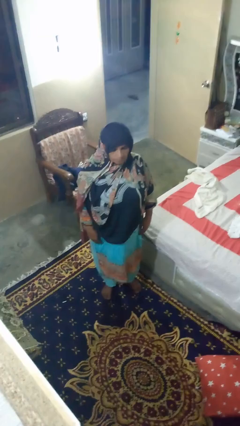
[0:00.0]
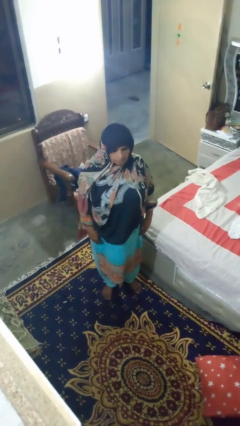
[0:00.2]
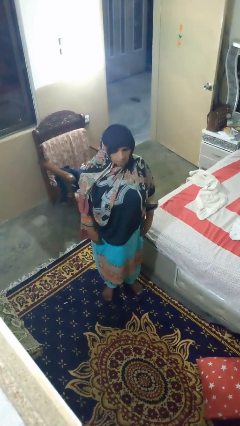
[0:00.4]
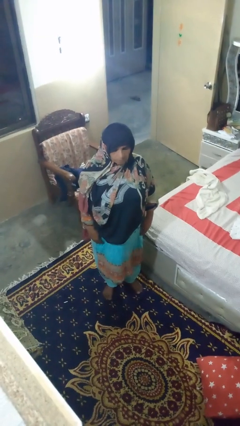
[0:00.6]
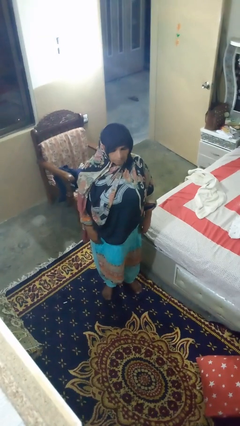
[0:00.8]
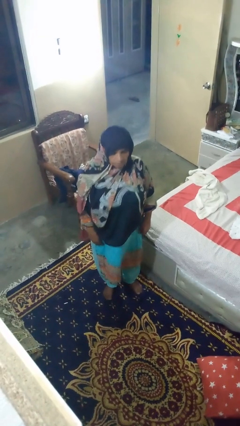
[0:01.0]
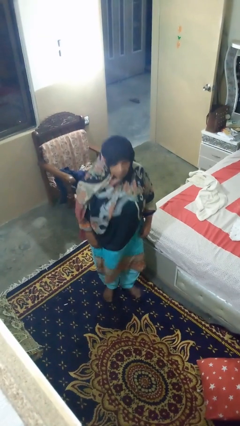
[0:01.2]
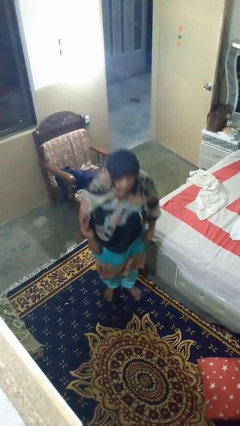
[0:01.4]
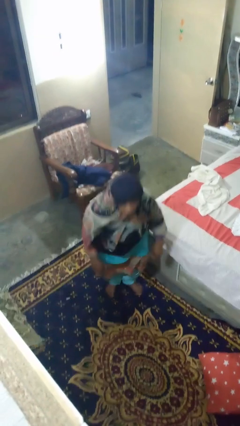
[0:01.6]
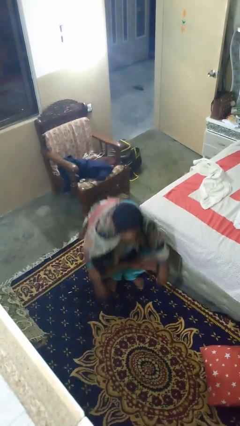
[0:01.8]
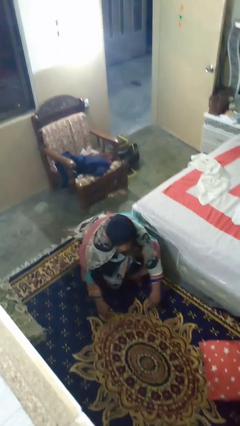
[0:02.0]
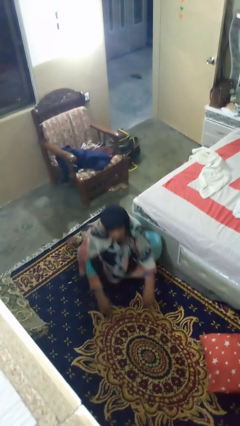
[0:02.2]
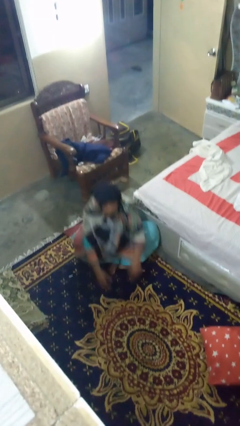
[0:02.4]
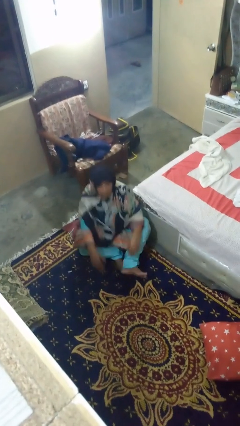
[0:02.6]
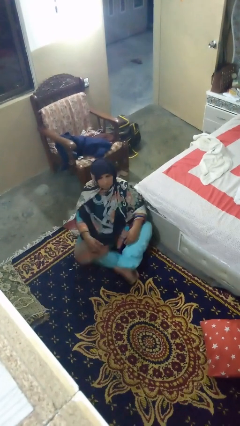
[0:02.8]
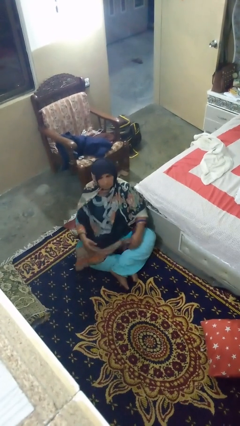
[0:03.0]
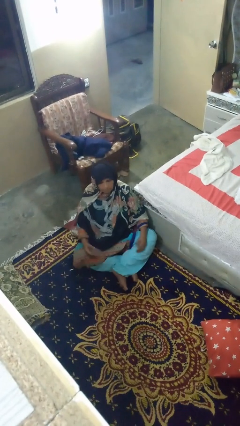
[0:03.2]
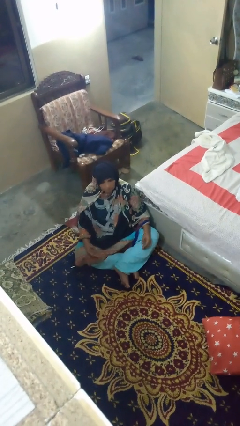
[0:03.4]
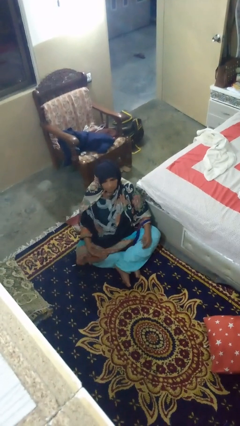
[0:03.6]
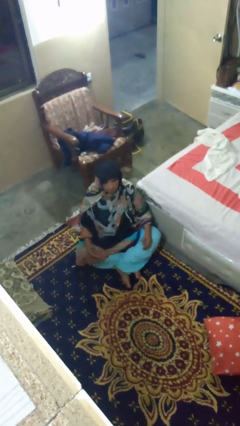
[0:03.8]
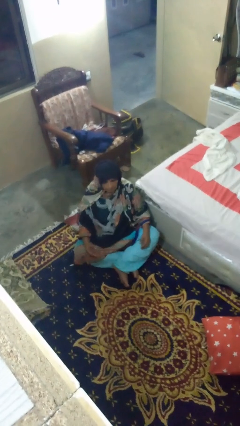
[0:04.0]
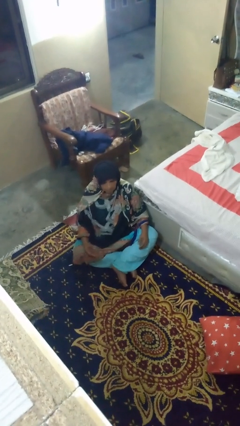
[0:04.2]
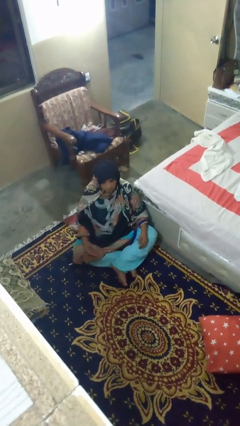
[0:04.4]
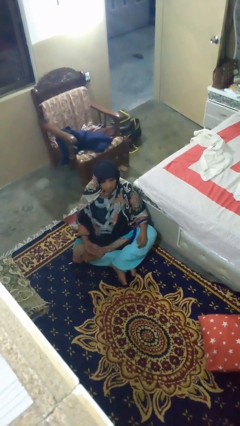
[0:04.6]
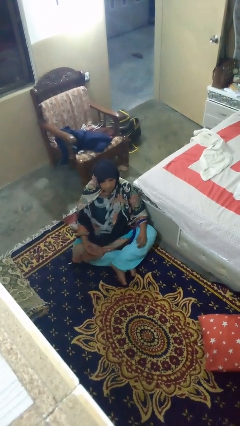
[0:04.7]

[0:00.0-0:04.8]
person sits crisscross

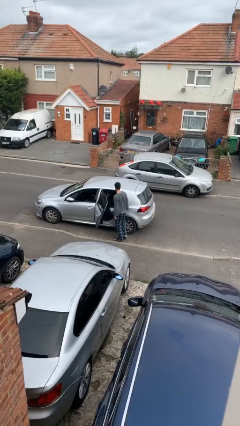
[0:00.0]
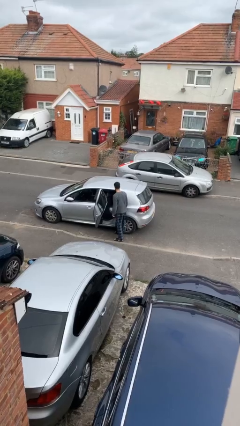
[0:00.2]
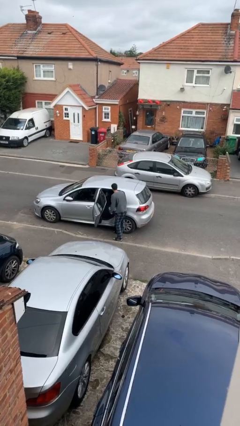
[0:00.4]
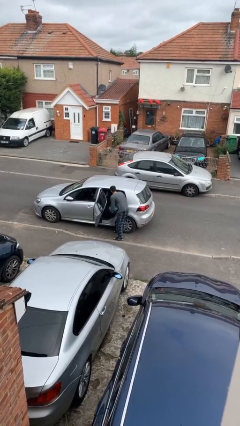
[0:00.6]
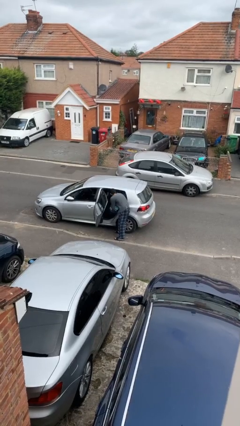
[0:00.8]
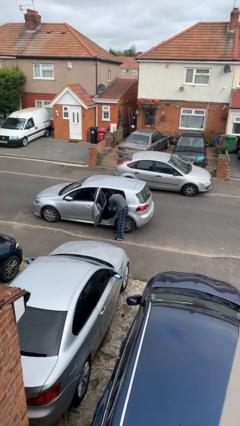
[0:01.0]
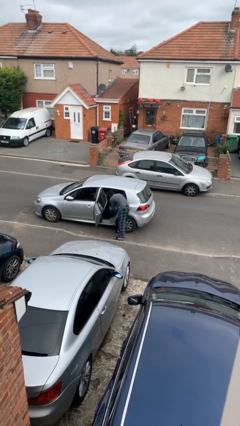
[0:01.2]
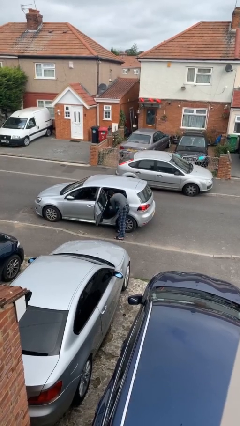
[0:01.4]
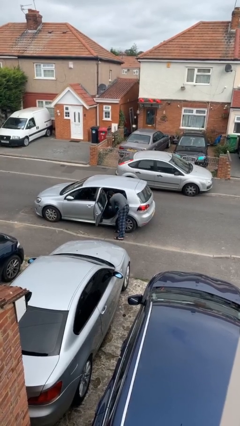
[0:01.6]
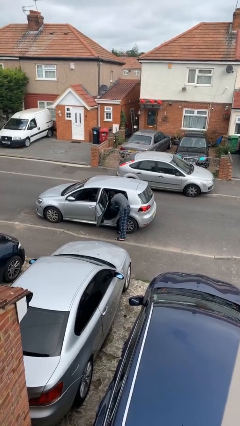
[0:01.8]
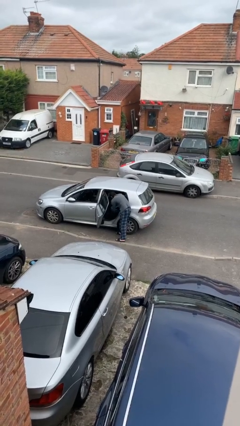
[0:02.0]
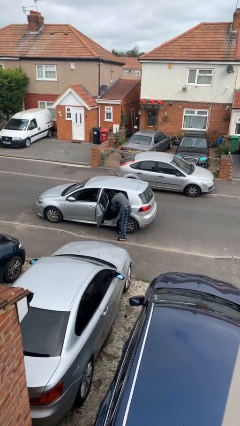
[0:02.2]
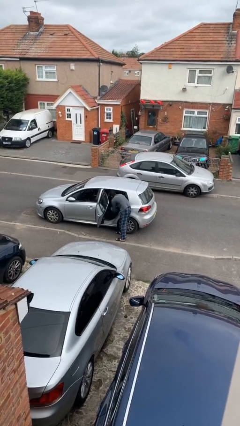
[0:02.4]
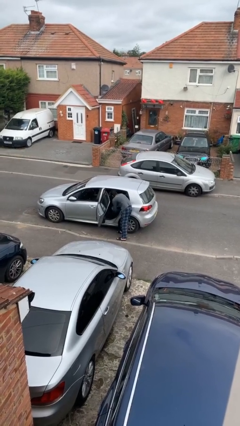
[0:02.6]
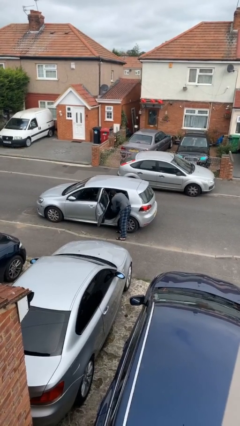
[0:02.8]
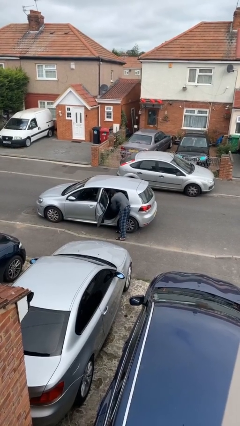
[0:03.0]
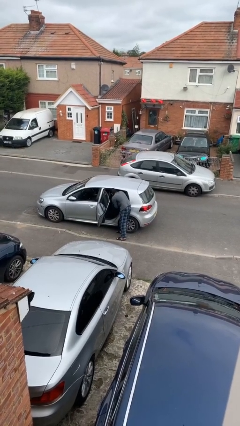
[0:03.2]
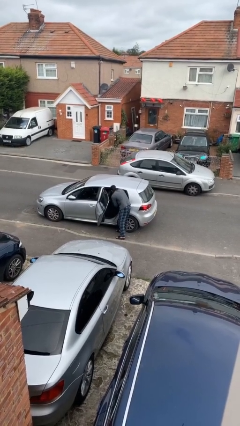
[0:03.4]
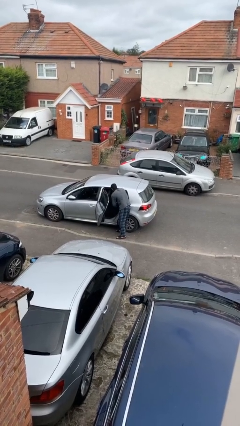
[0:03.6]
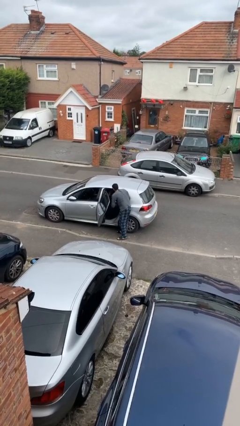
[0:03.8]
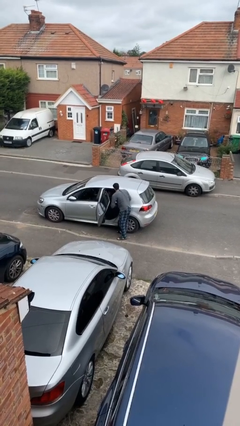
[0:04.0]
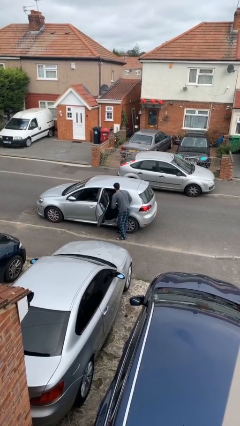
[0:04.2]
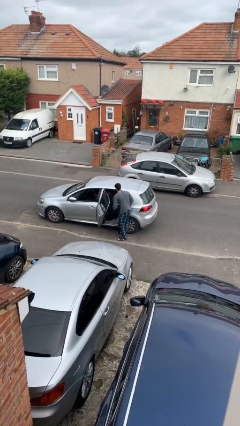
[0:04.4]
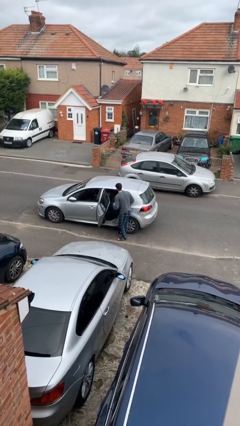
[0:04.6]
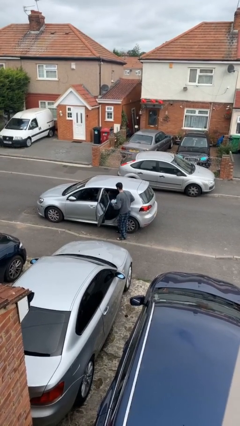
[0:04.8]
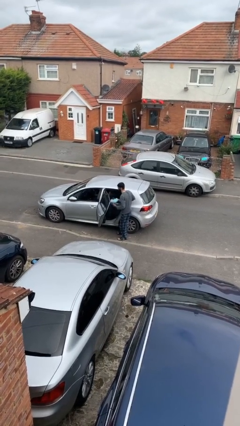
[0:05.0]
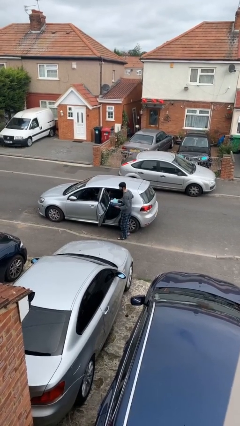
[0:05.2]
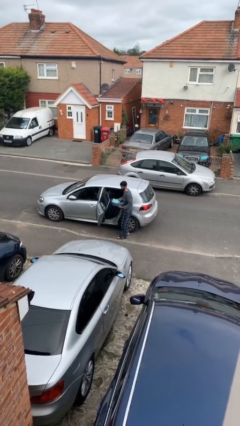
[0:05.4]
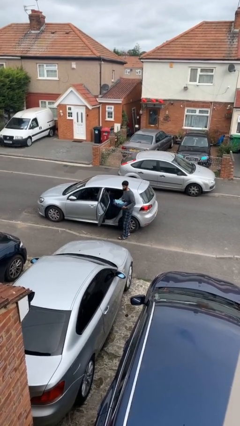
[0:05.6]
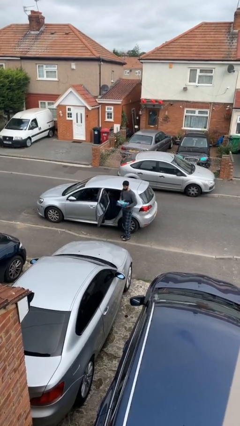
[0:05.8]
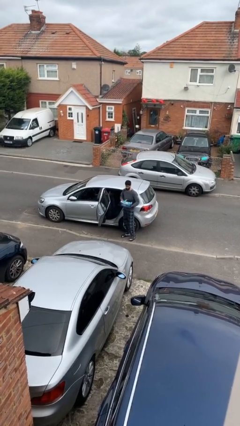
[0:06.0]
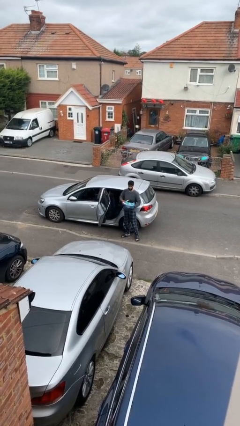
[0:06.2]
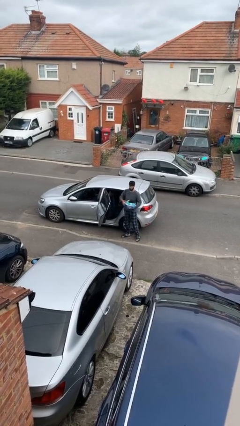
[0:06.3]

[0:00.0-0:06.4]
person unloads car

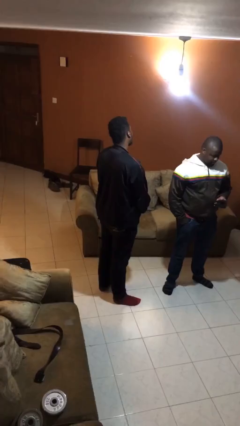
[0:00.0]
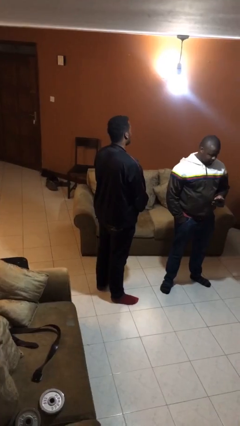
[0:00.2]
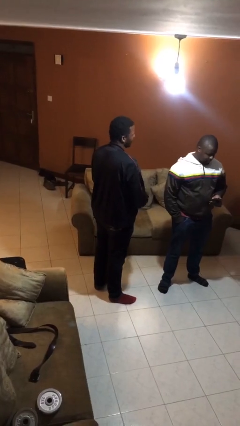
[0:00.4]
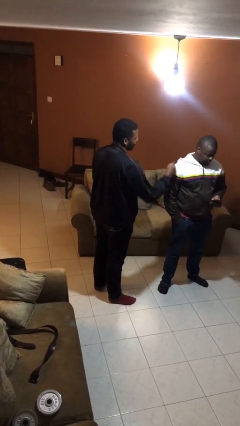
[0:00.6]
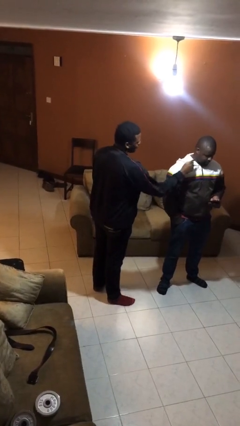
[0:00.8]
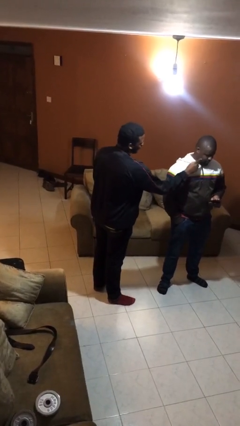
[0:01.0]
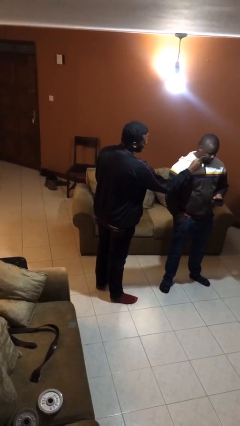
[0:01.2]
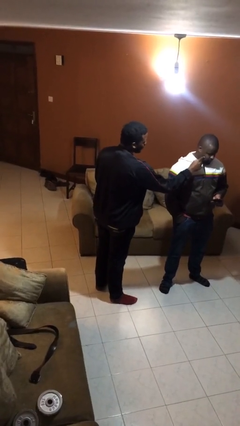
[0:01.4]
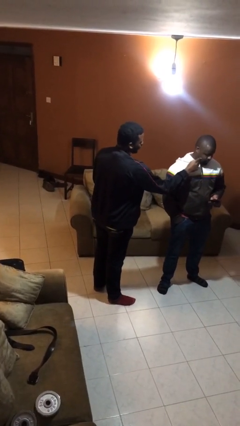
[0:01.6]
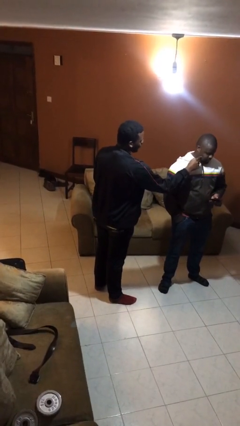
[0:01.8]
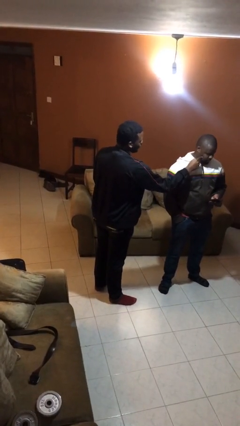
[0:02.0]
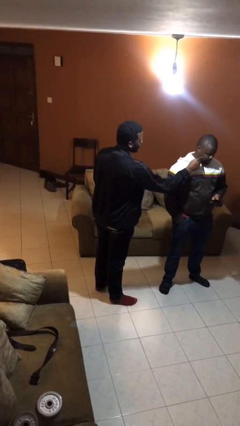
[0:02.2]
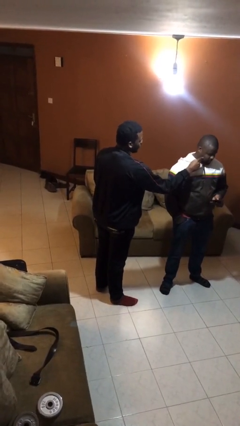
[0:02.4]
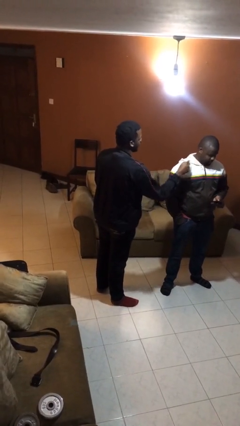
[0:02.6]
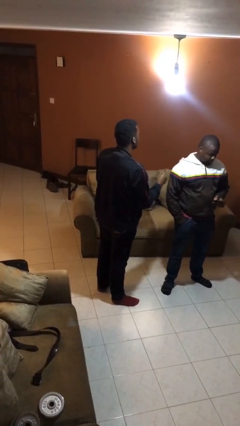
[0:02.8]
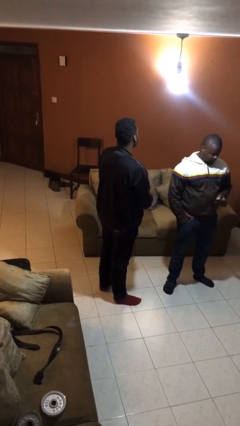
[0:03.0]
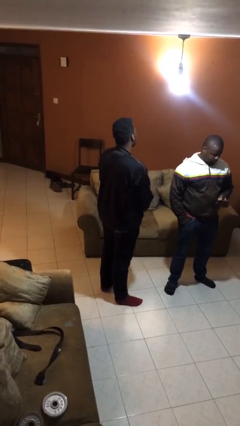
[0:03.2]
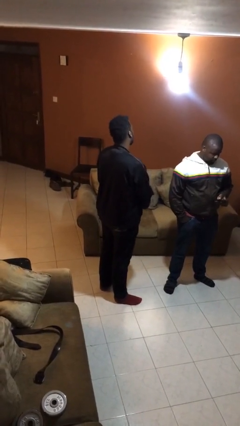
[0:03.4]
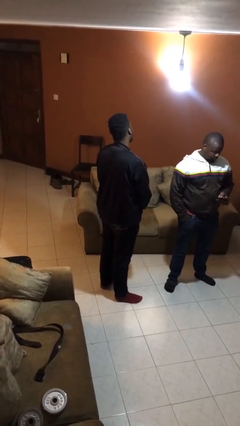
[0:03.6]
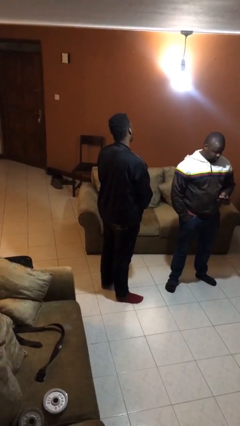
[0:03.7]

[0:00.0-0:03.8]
person touches face of person

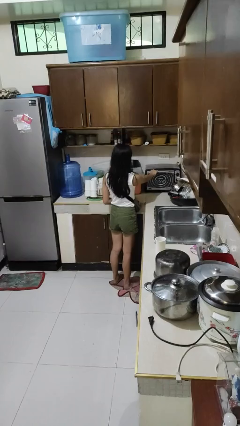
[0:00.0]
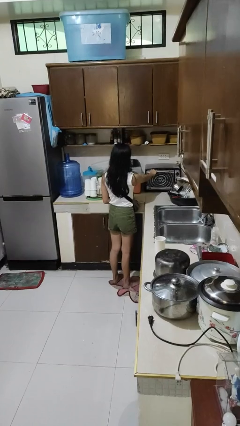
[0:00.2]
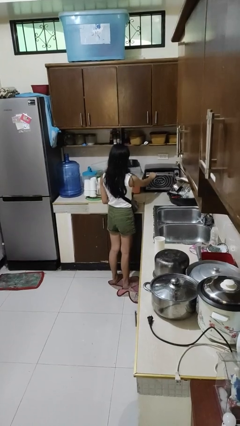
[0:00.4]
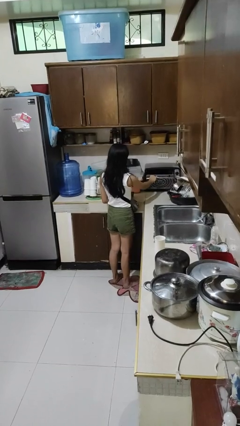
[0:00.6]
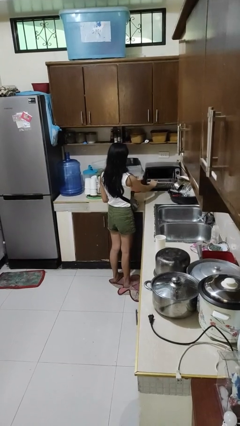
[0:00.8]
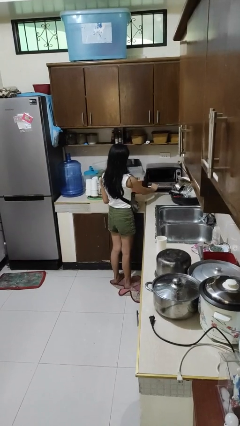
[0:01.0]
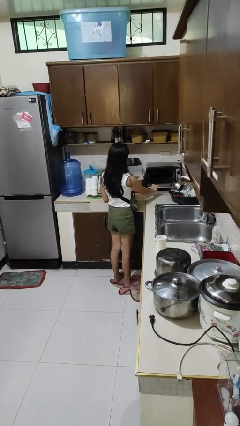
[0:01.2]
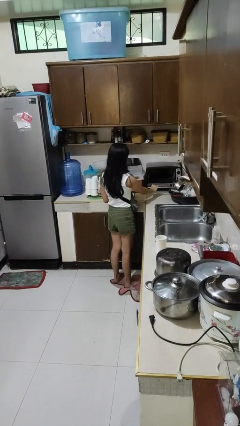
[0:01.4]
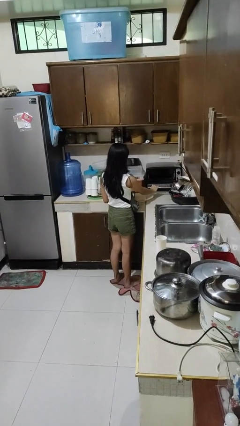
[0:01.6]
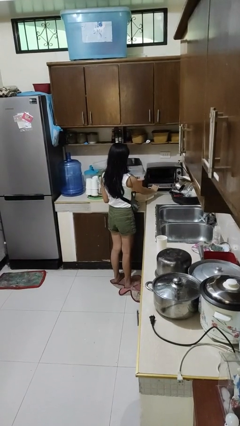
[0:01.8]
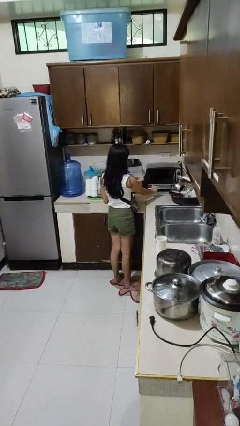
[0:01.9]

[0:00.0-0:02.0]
person opens microwave

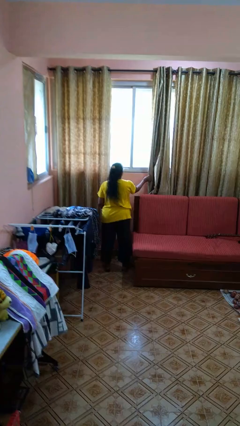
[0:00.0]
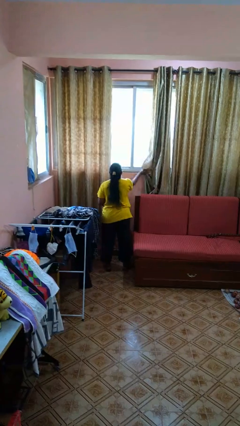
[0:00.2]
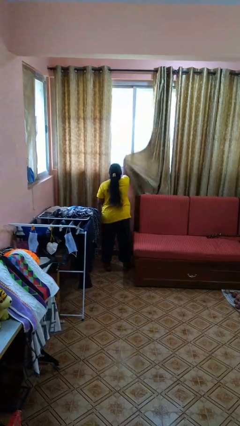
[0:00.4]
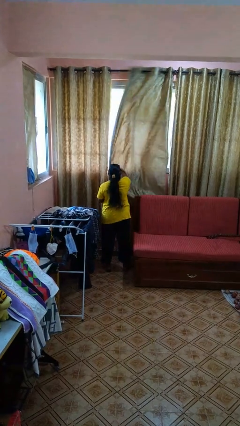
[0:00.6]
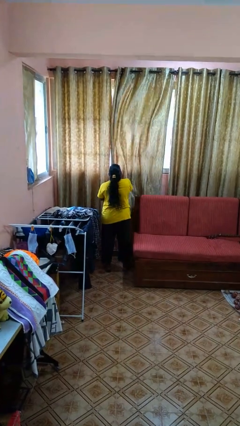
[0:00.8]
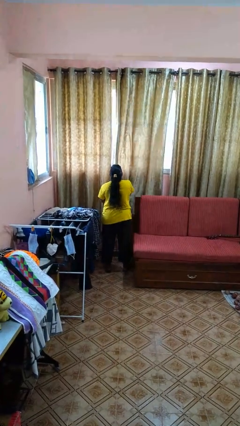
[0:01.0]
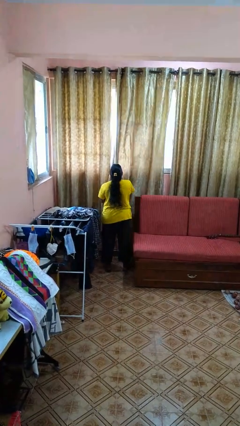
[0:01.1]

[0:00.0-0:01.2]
person closes curtains
